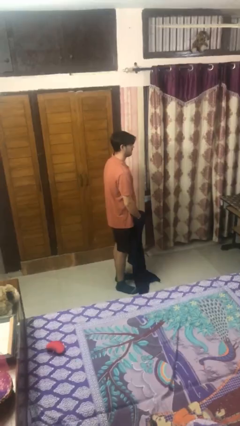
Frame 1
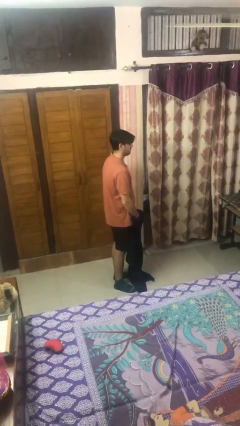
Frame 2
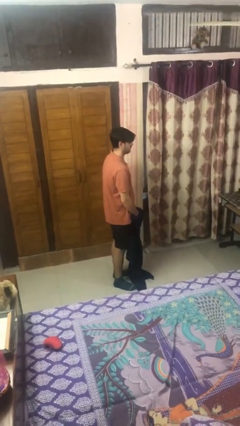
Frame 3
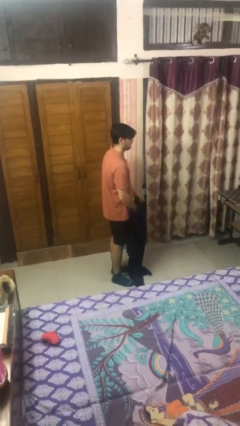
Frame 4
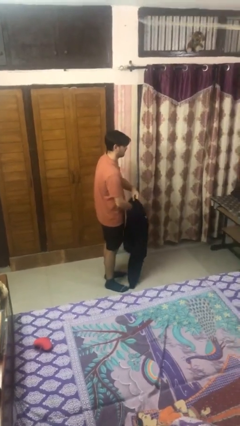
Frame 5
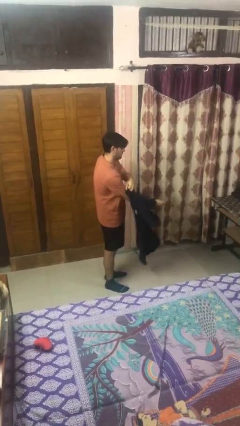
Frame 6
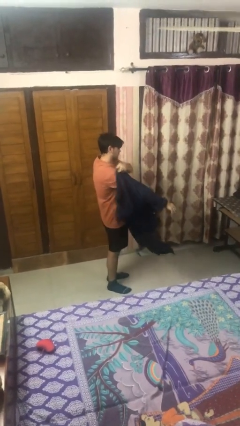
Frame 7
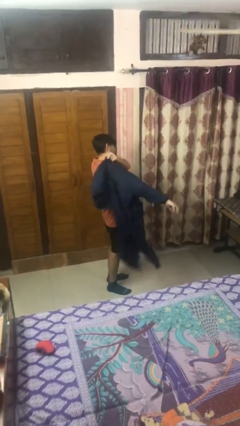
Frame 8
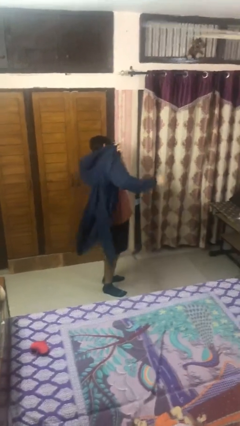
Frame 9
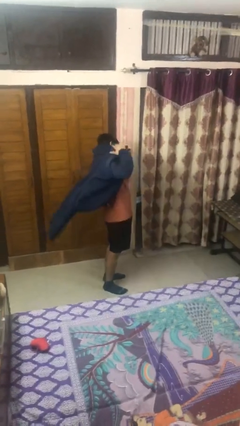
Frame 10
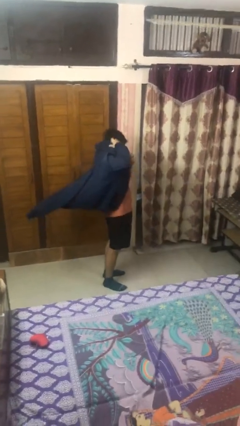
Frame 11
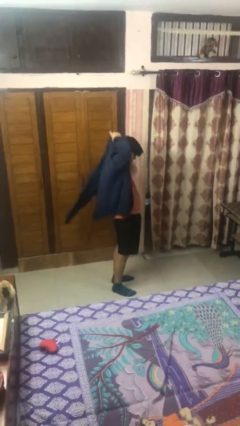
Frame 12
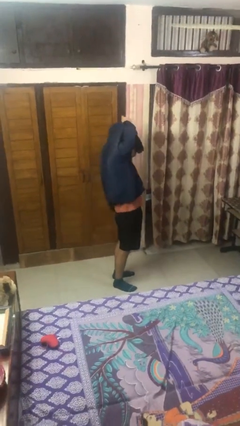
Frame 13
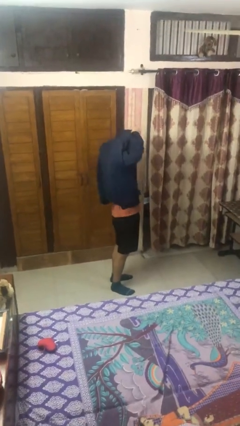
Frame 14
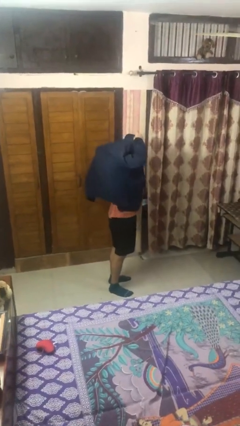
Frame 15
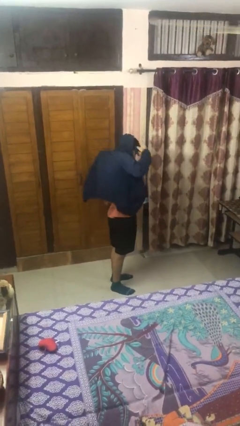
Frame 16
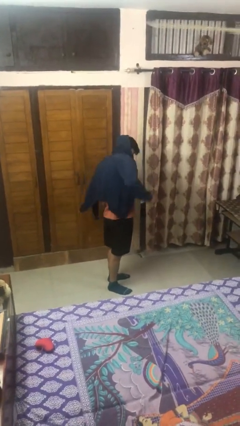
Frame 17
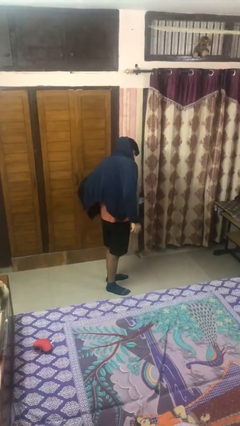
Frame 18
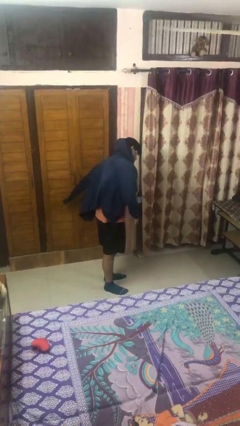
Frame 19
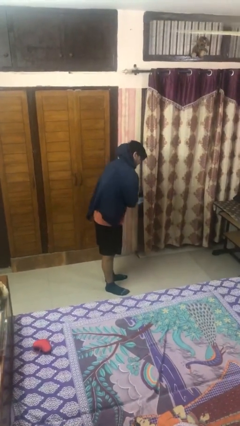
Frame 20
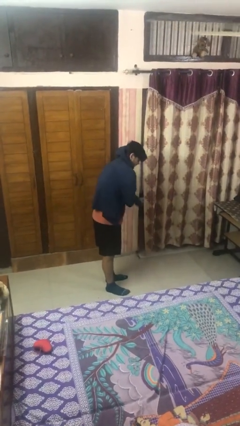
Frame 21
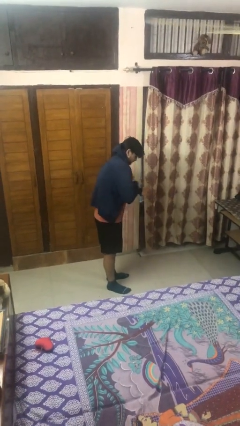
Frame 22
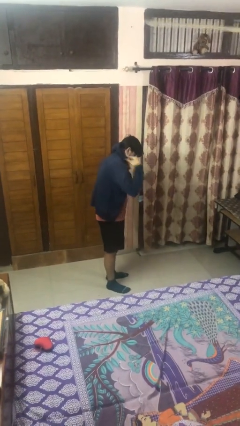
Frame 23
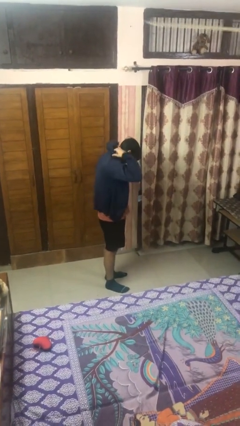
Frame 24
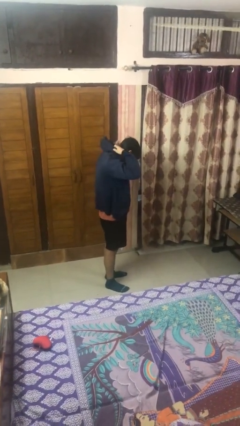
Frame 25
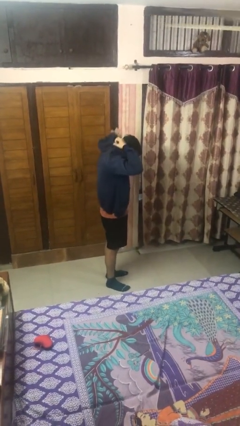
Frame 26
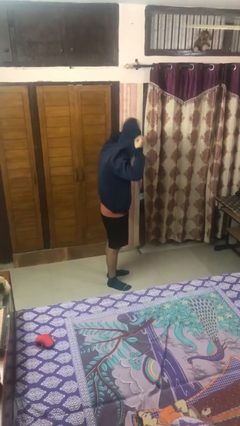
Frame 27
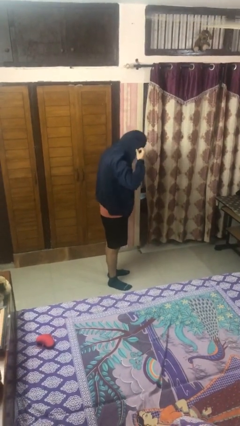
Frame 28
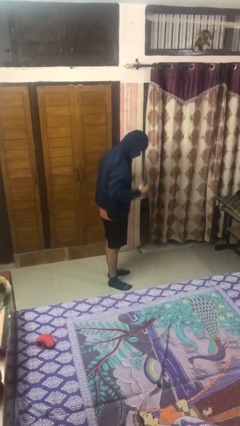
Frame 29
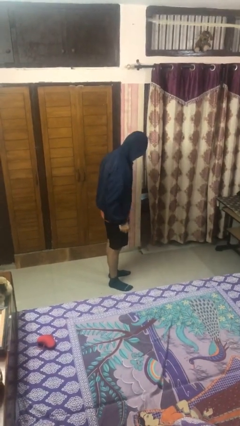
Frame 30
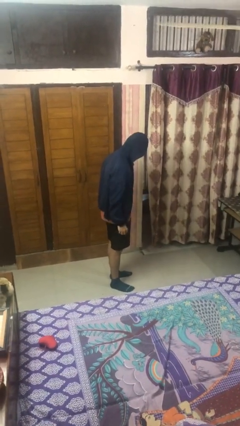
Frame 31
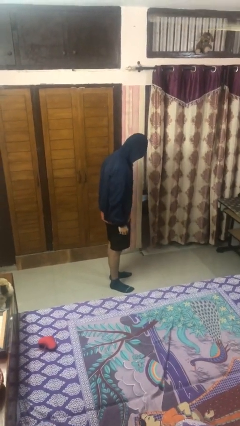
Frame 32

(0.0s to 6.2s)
person puts on hoodie

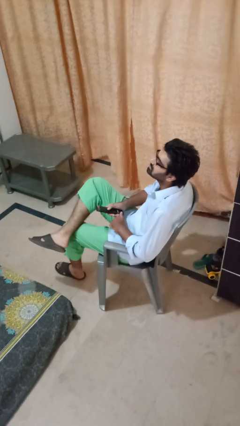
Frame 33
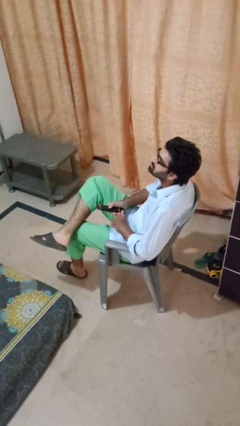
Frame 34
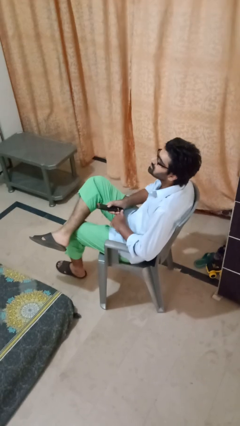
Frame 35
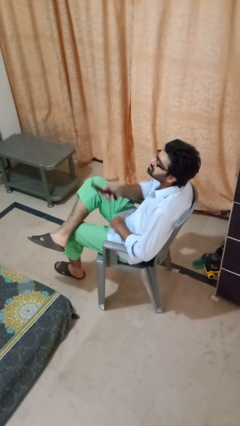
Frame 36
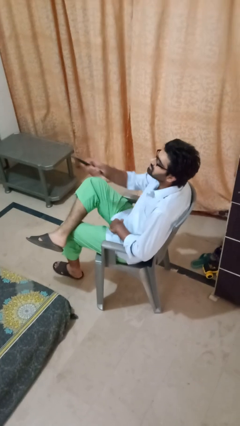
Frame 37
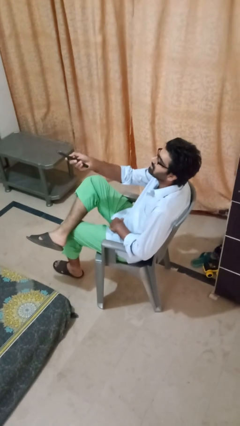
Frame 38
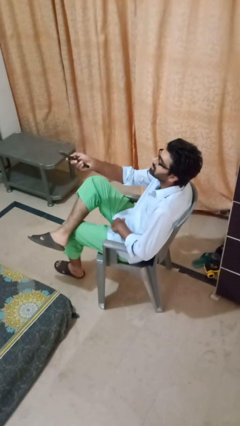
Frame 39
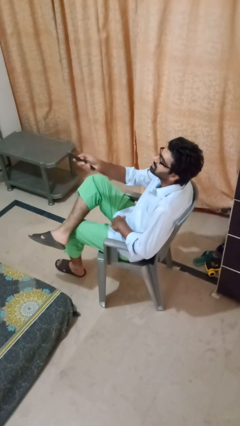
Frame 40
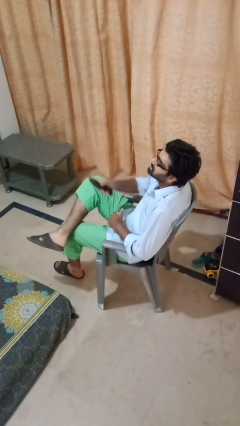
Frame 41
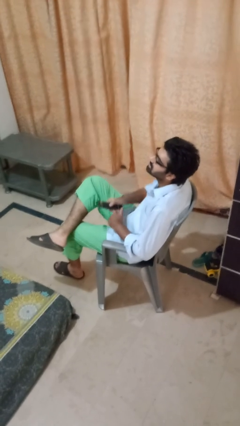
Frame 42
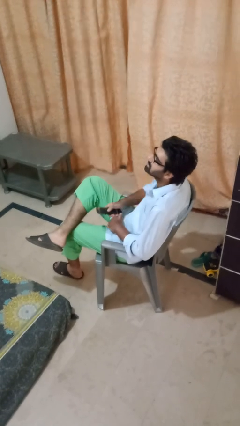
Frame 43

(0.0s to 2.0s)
person uses television remote

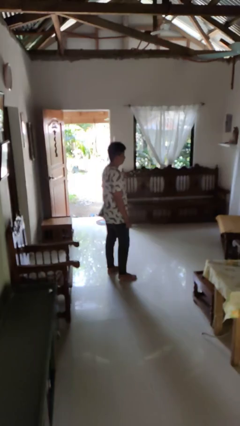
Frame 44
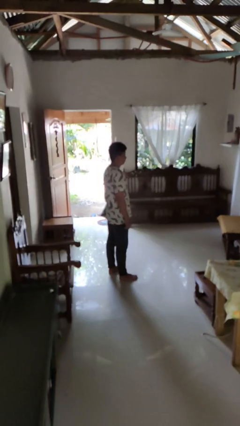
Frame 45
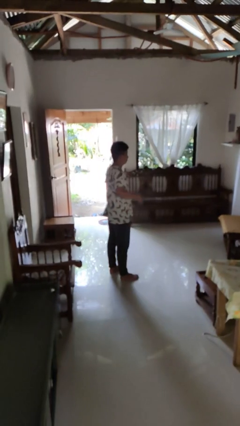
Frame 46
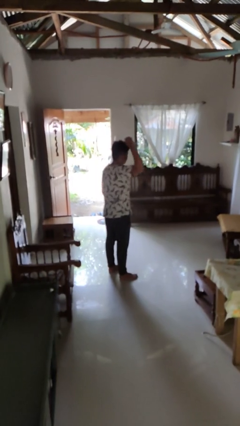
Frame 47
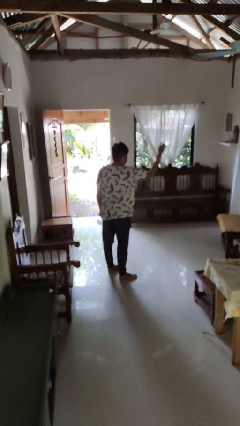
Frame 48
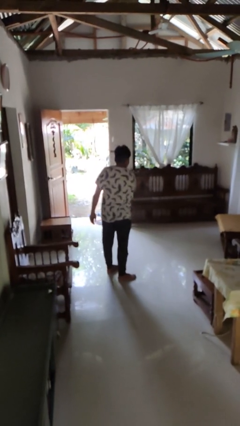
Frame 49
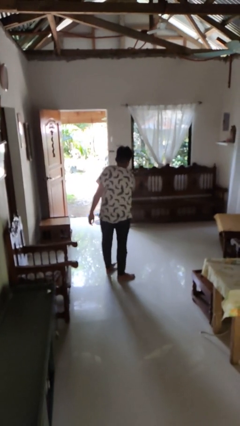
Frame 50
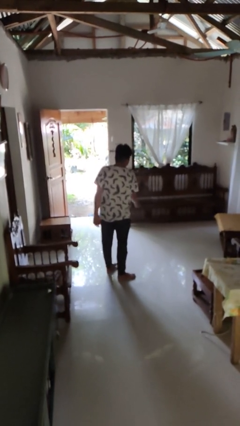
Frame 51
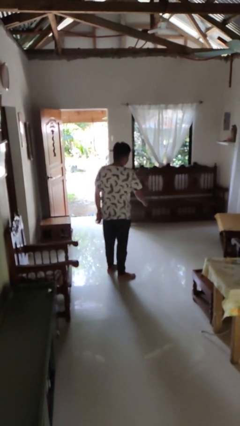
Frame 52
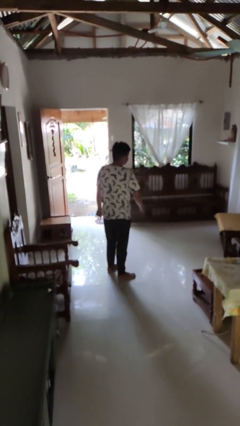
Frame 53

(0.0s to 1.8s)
person karate chop

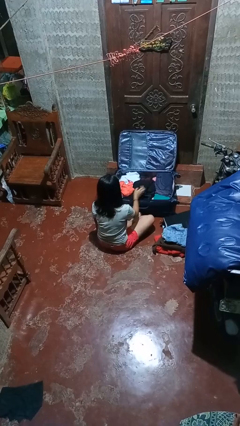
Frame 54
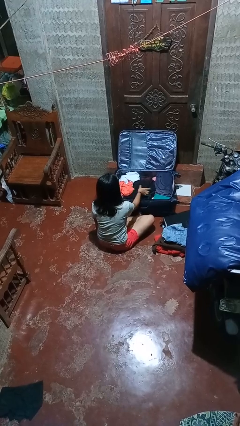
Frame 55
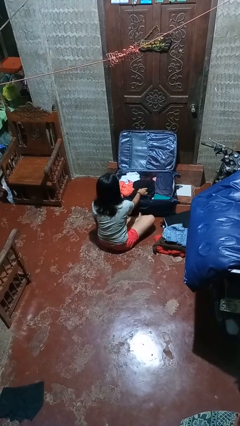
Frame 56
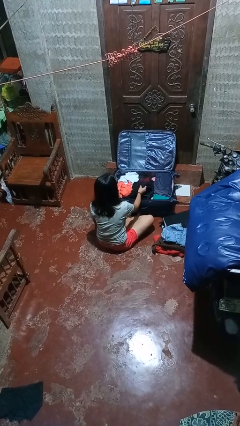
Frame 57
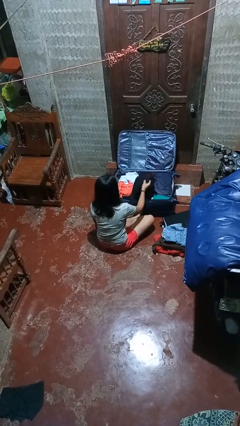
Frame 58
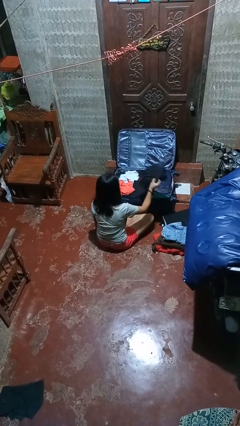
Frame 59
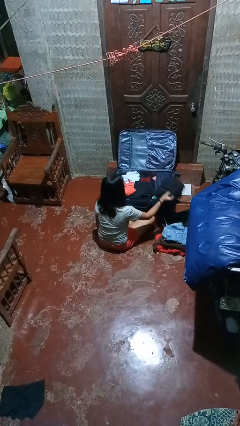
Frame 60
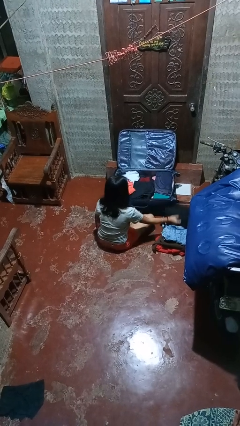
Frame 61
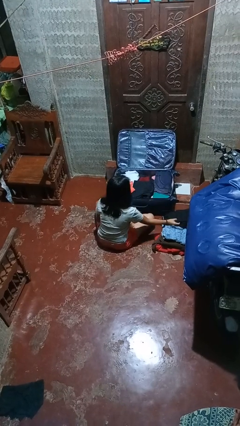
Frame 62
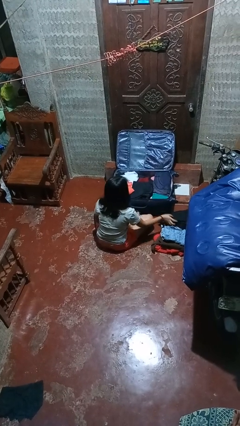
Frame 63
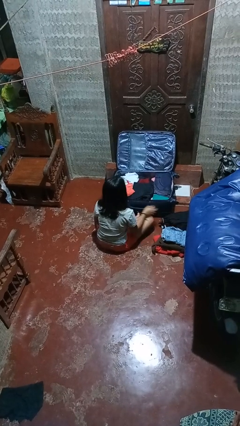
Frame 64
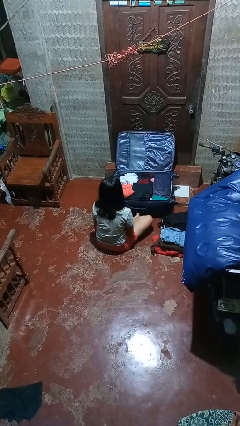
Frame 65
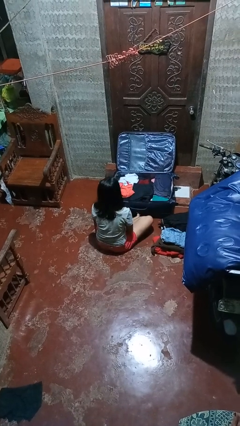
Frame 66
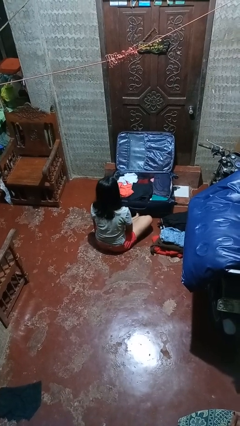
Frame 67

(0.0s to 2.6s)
person unloads clothes from suitcase

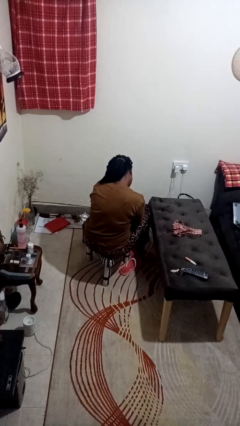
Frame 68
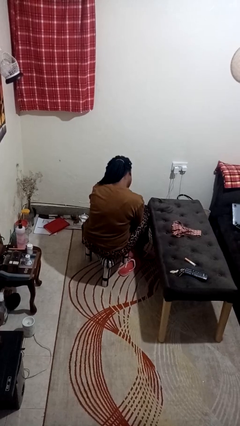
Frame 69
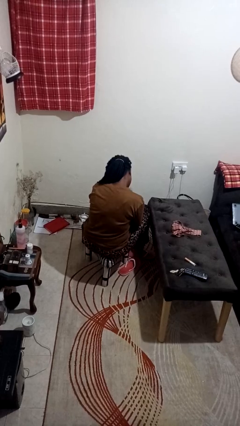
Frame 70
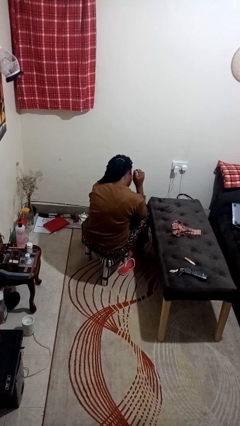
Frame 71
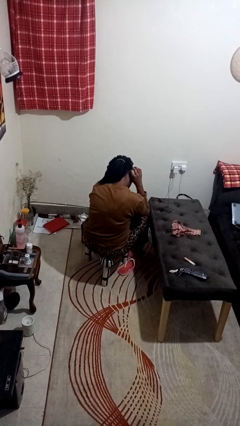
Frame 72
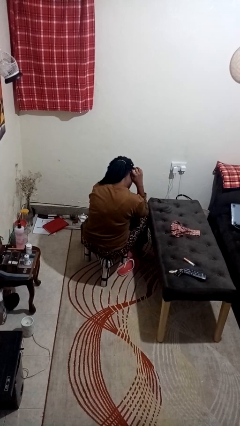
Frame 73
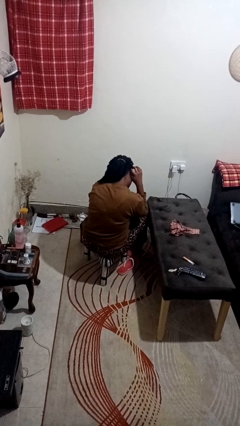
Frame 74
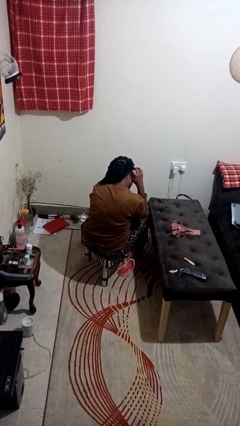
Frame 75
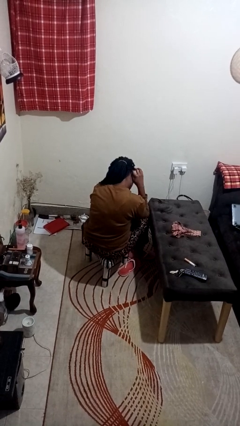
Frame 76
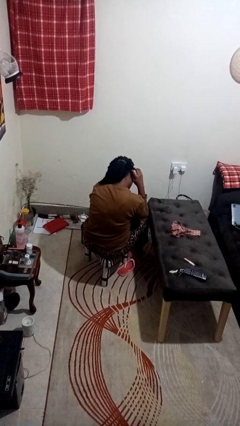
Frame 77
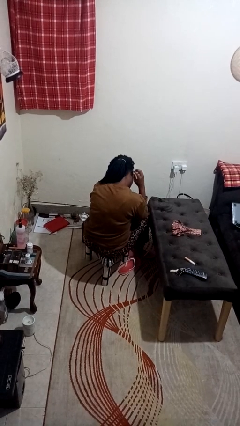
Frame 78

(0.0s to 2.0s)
person gestures listen closely

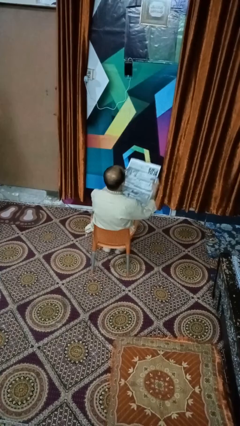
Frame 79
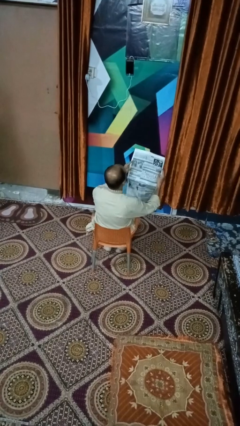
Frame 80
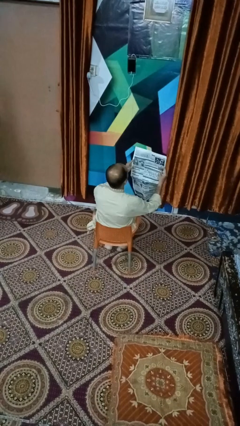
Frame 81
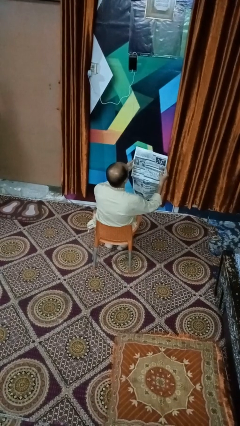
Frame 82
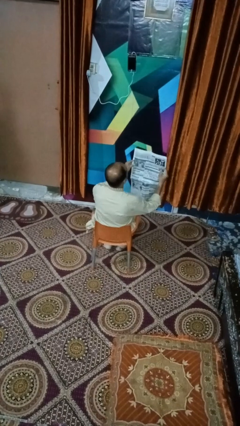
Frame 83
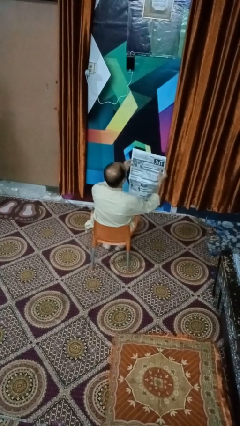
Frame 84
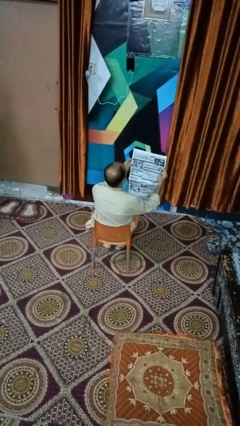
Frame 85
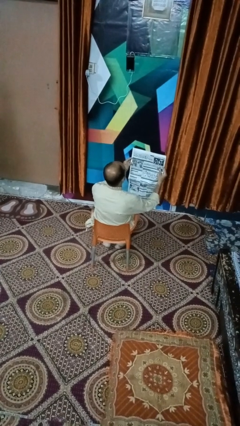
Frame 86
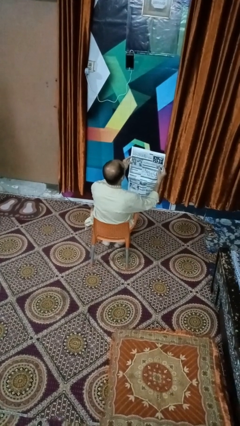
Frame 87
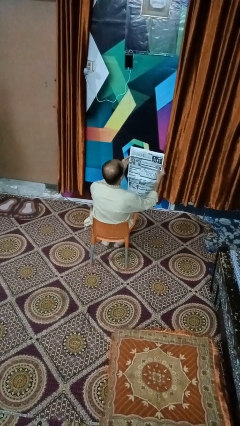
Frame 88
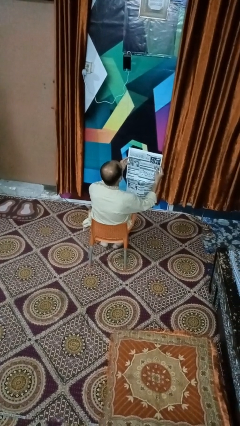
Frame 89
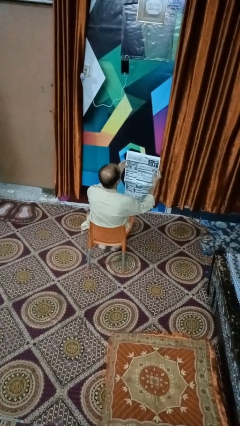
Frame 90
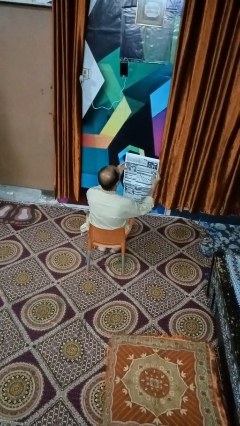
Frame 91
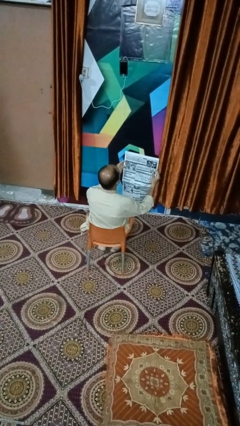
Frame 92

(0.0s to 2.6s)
person reads newspaper

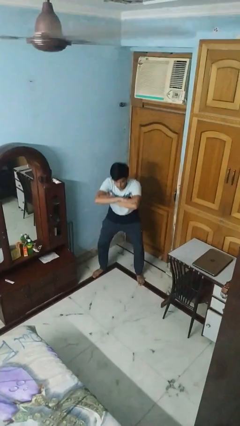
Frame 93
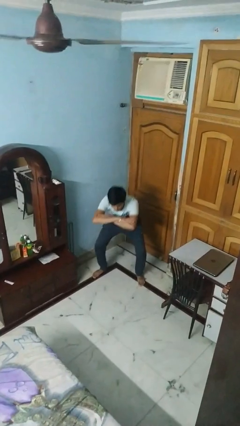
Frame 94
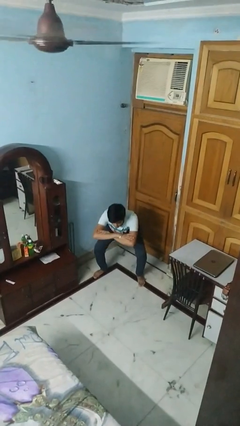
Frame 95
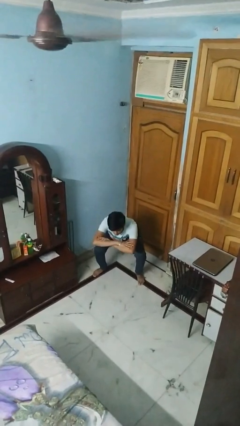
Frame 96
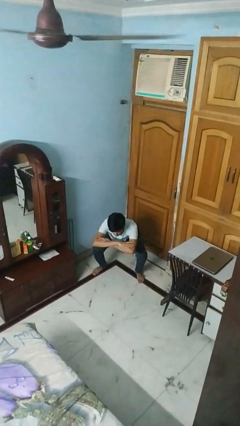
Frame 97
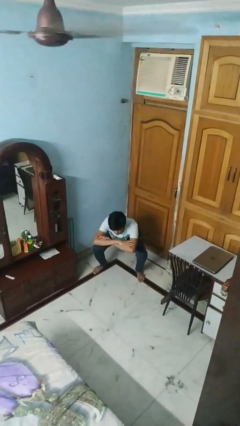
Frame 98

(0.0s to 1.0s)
person squats
